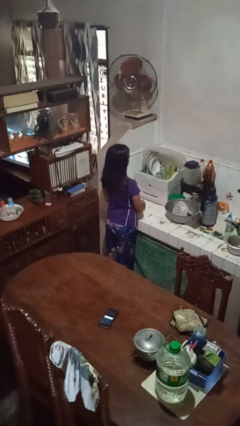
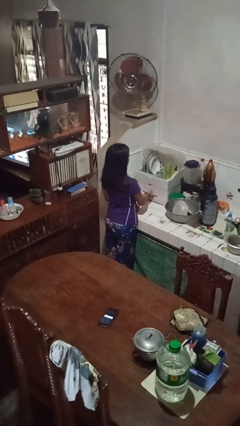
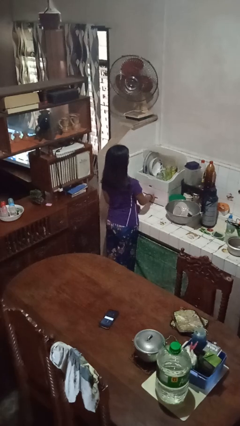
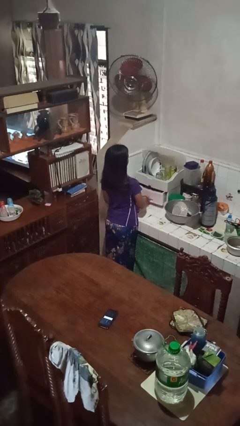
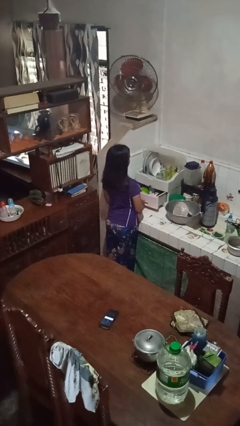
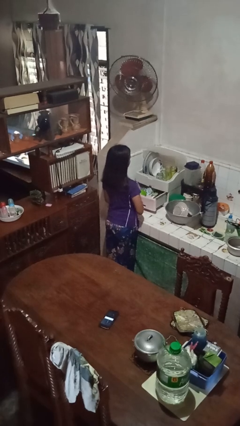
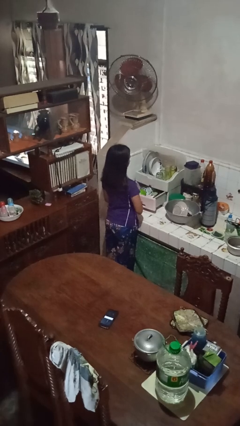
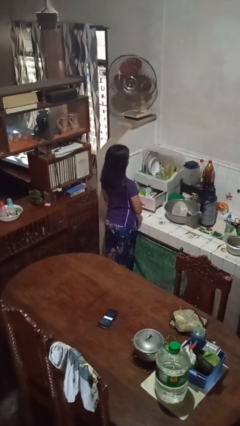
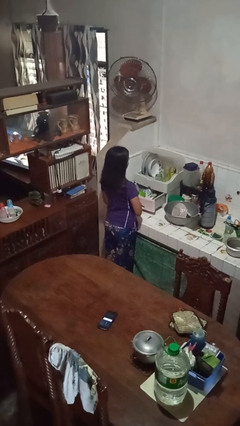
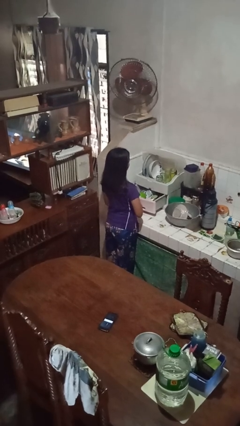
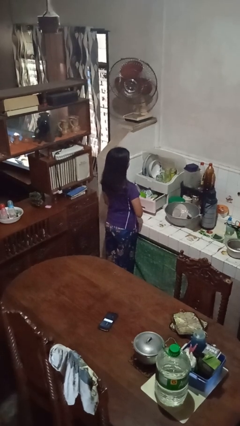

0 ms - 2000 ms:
person opens kitchen drawer

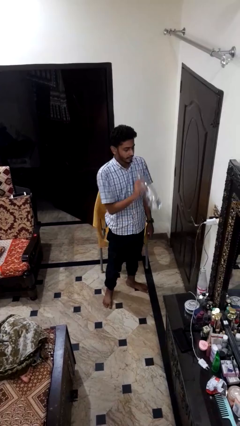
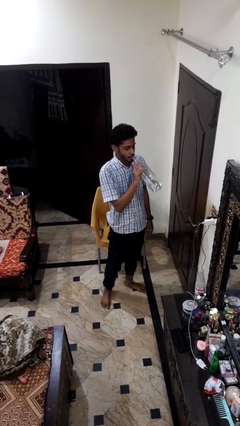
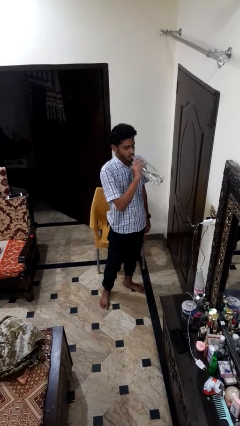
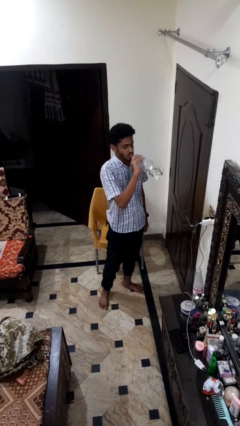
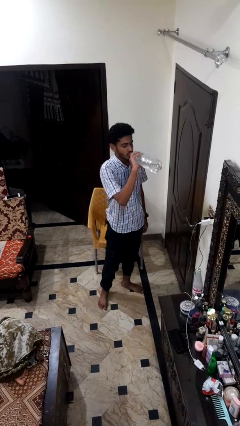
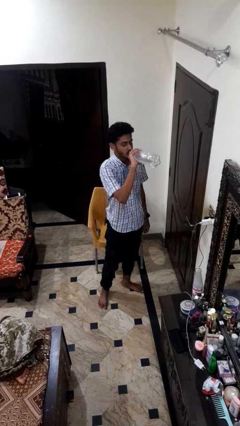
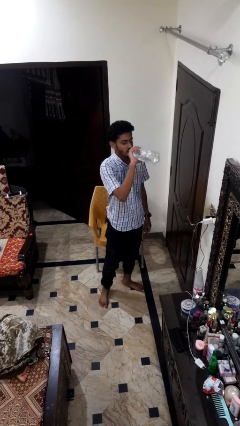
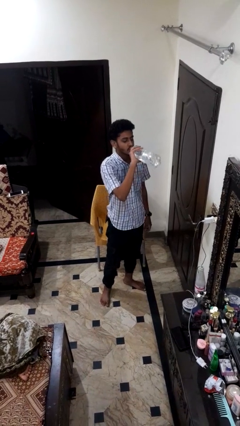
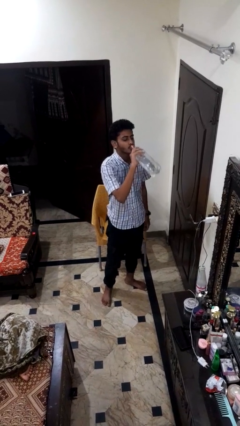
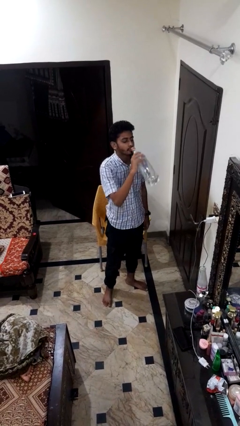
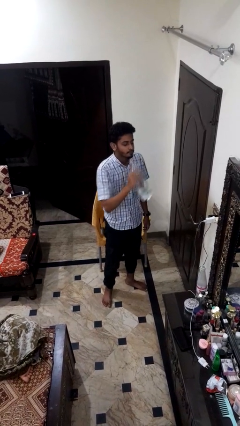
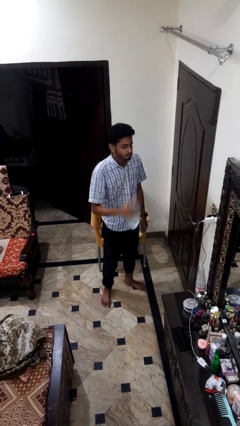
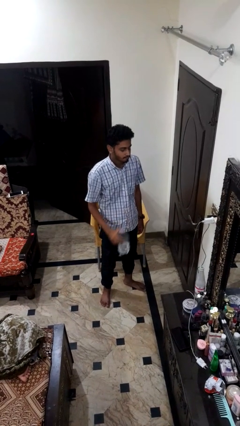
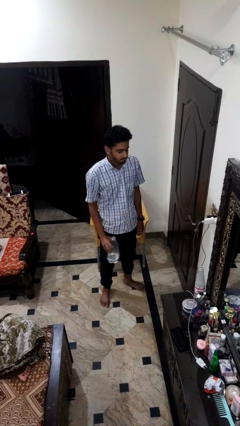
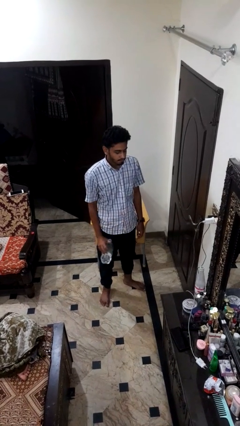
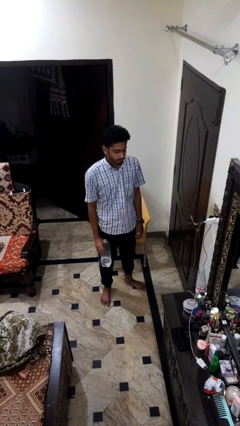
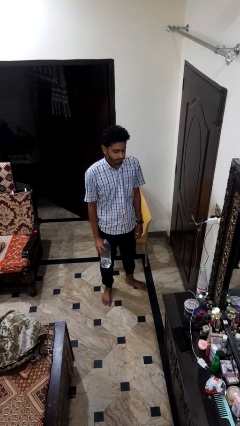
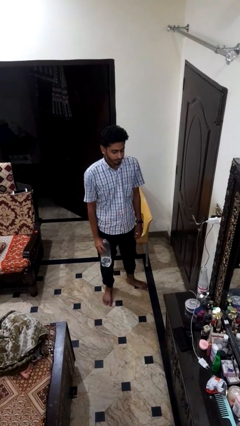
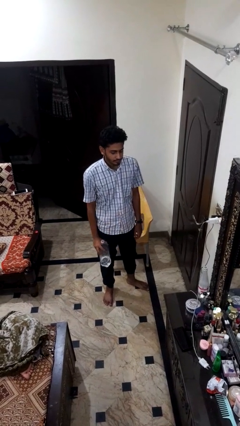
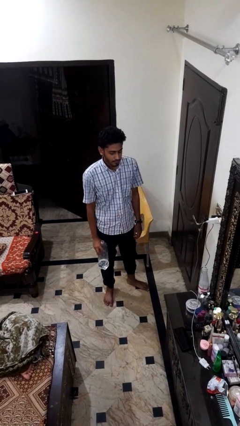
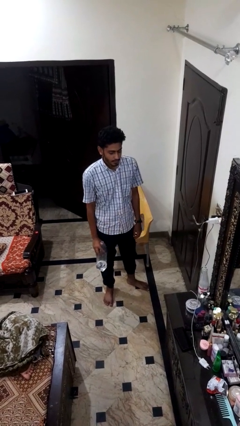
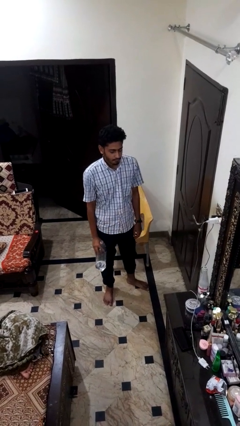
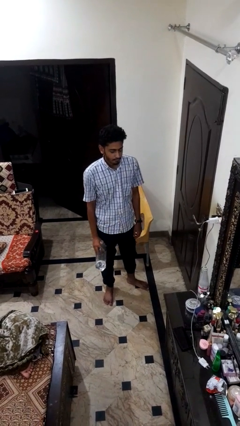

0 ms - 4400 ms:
person drinks from bottle

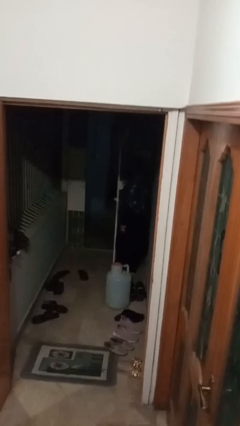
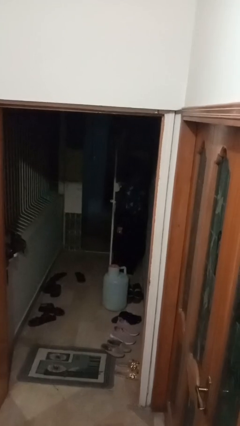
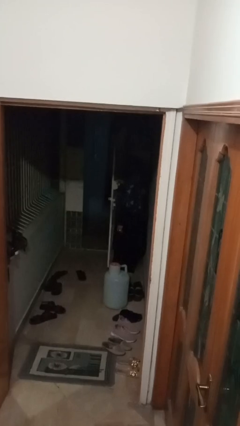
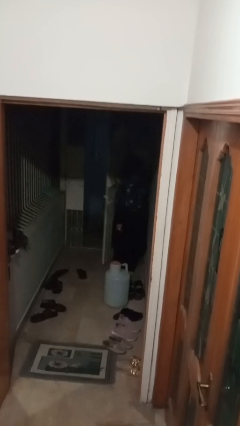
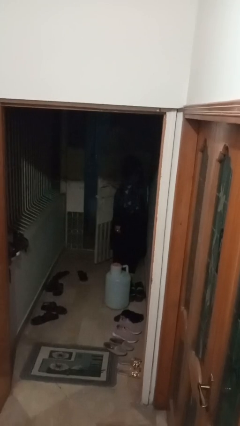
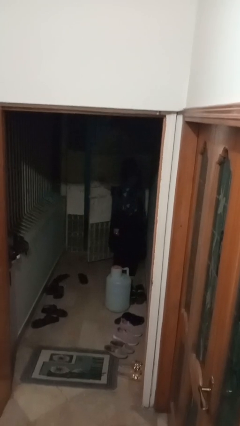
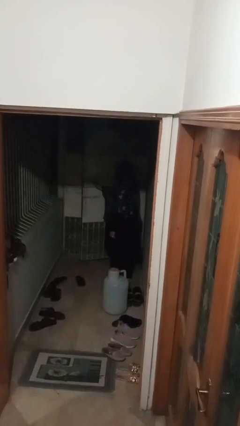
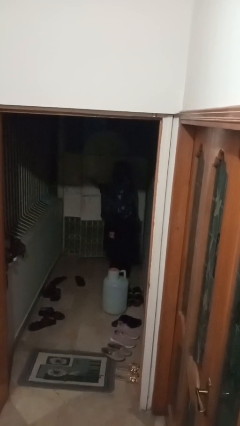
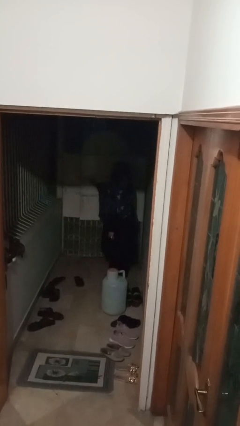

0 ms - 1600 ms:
person closes gate

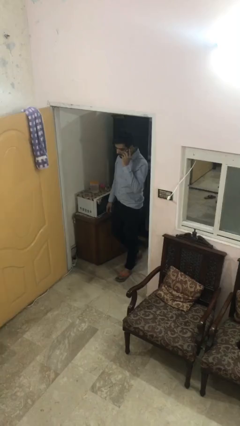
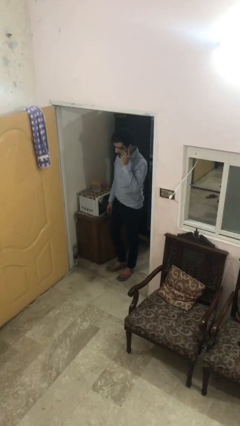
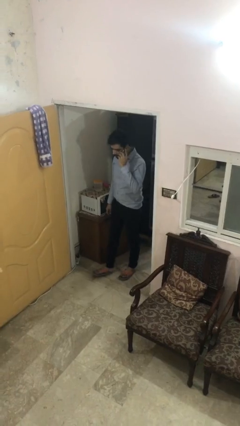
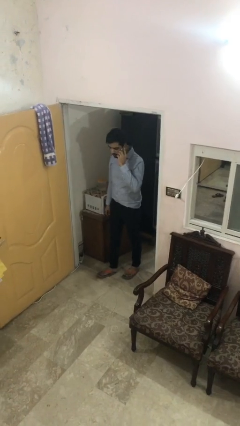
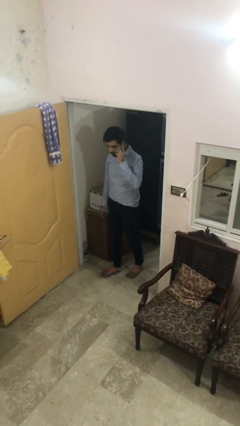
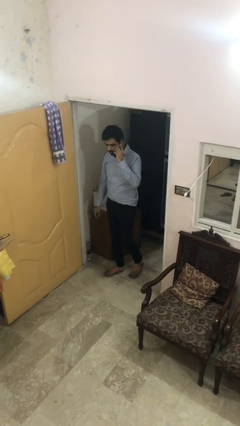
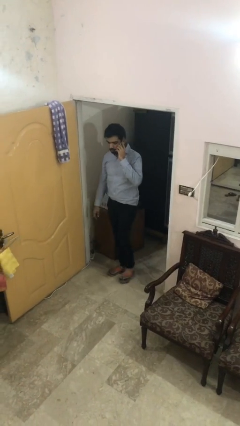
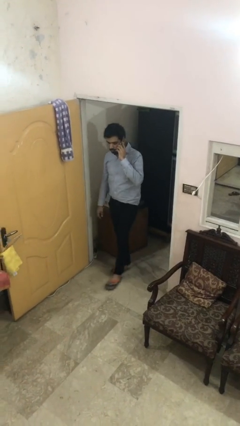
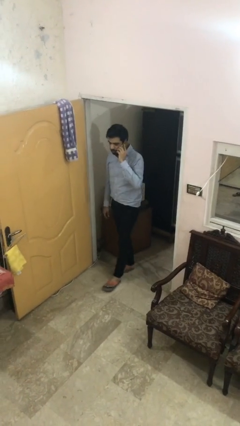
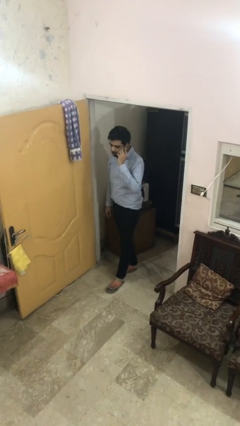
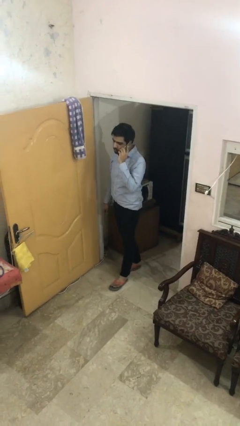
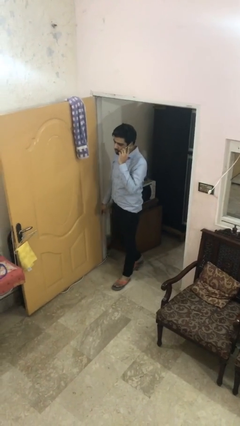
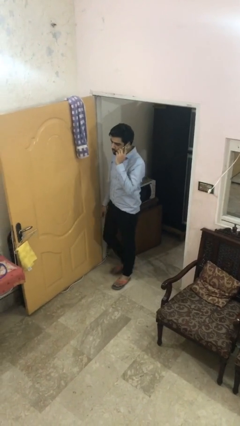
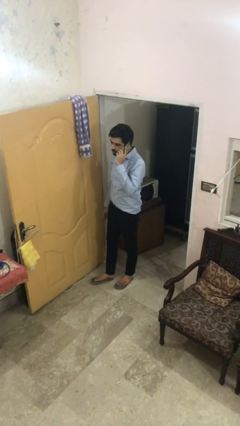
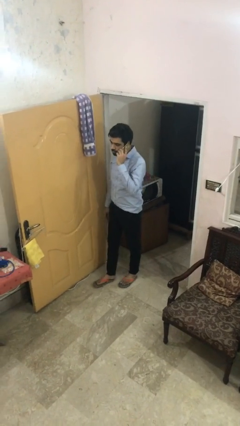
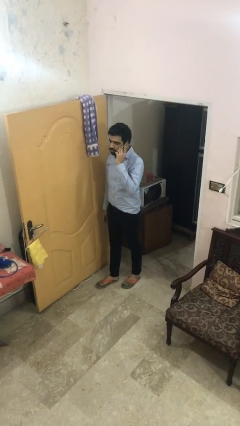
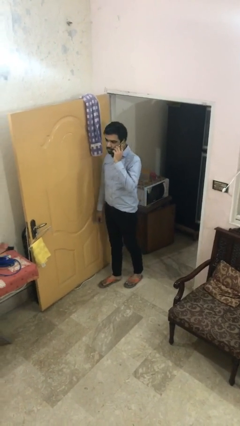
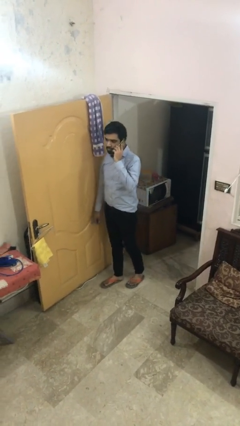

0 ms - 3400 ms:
person enters scene through structure

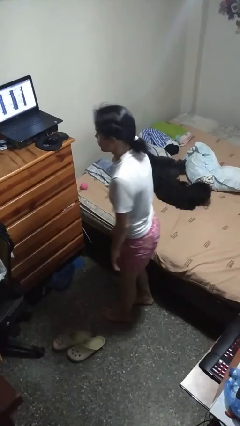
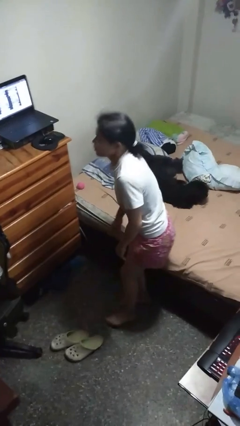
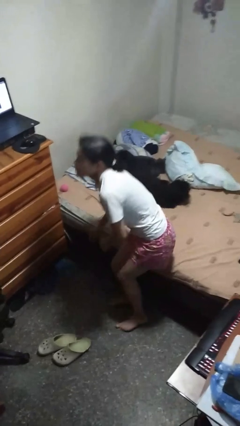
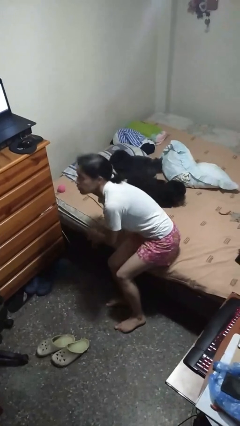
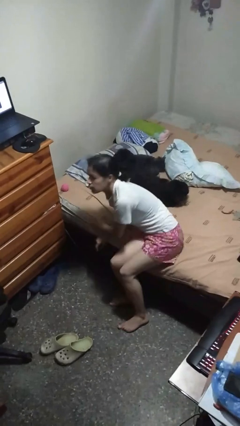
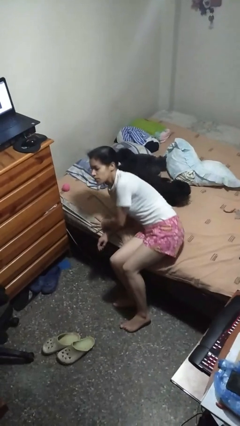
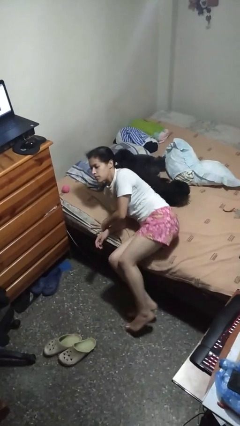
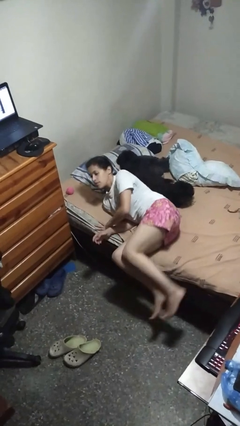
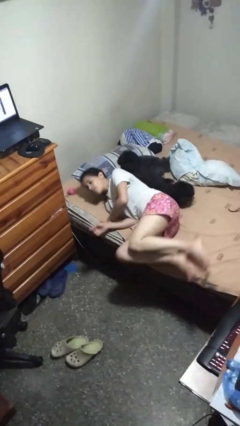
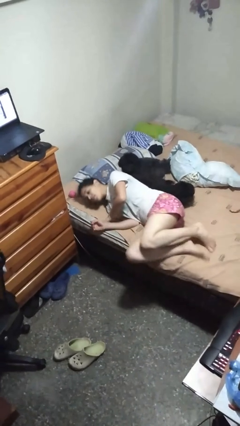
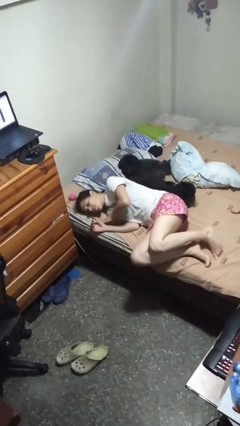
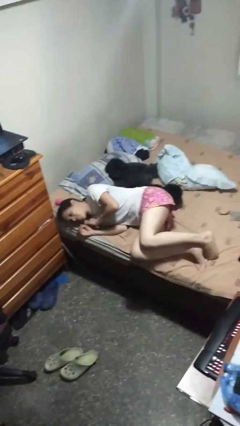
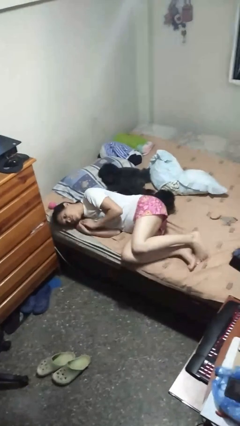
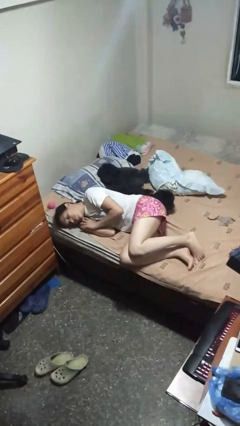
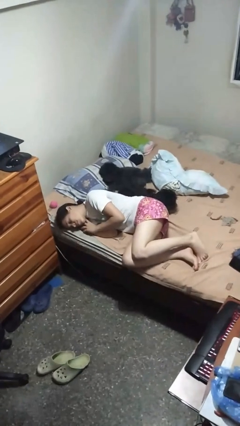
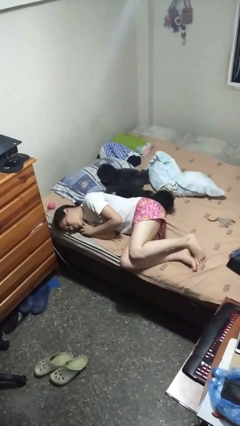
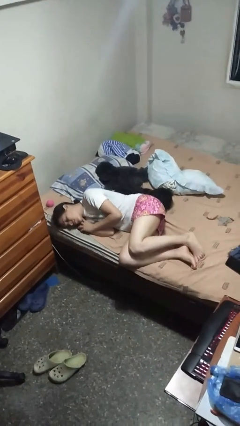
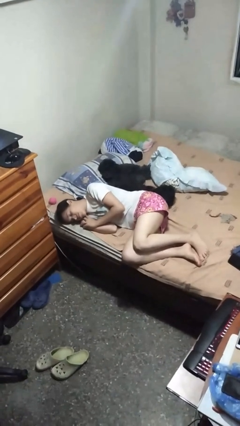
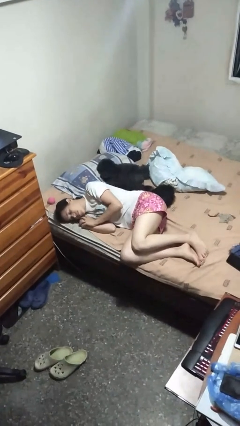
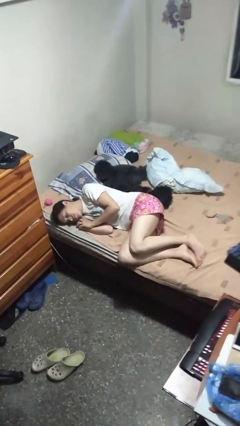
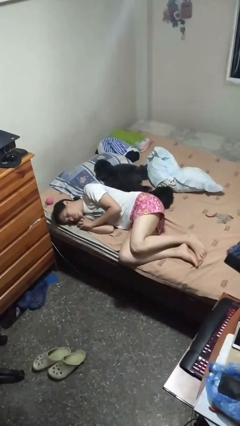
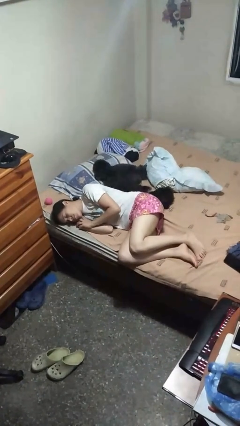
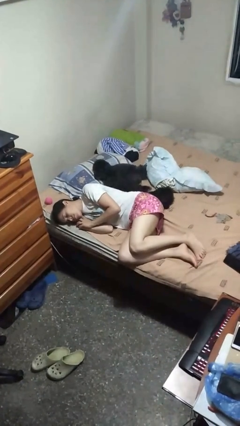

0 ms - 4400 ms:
person lies down on bed

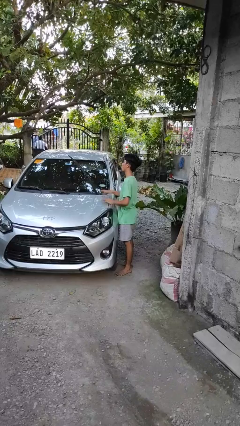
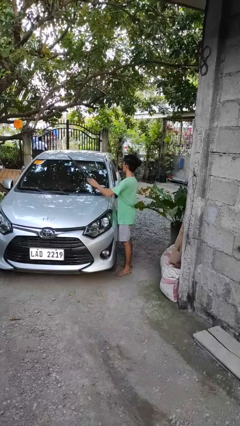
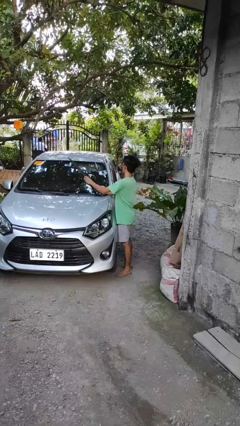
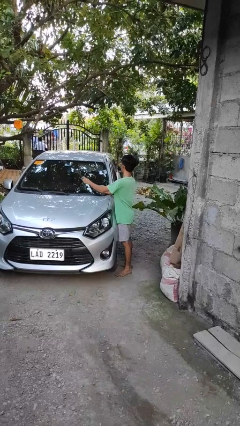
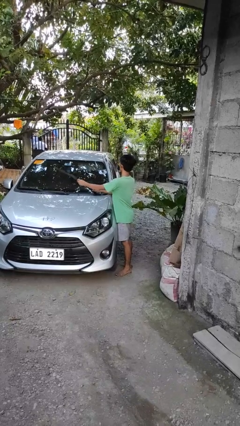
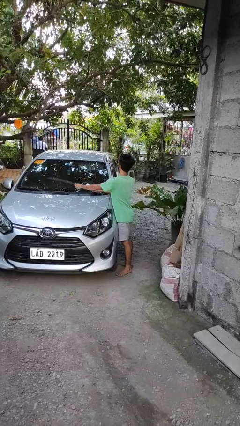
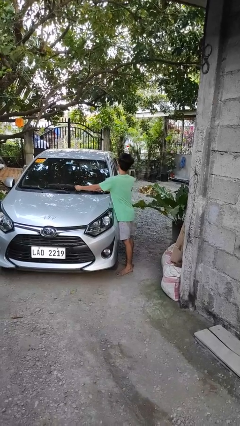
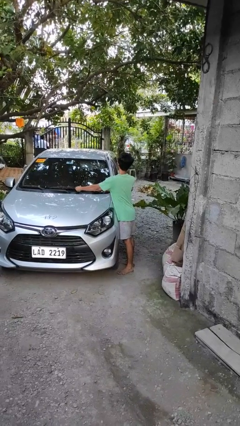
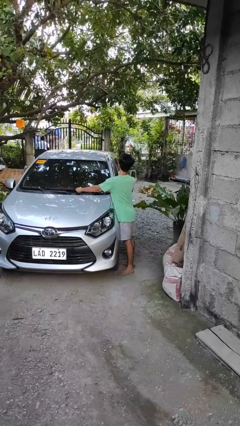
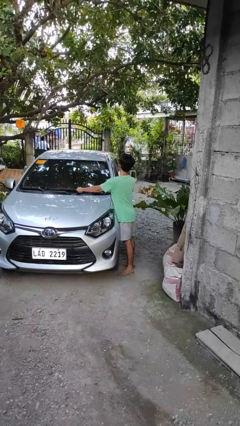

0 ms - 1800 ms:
person flips down car wipers
